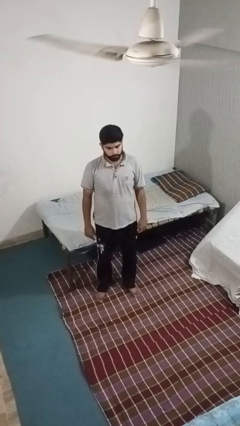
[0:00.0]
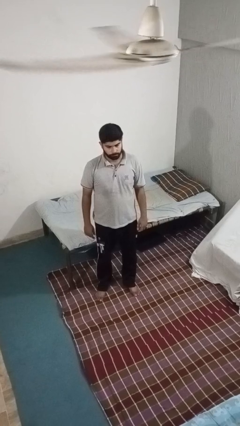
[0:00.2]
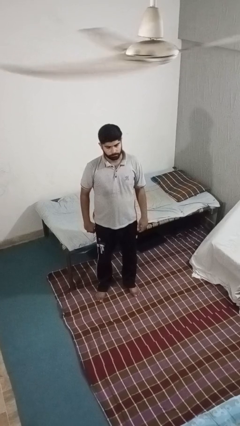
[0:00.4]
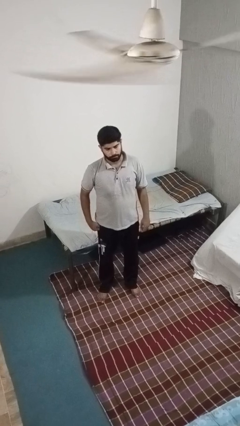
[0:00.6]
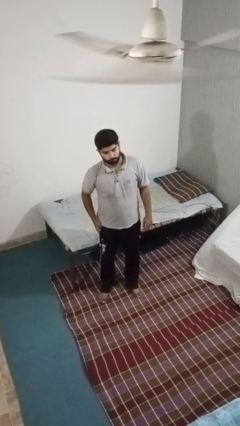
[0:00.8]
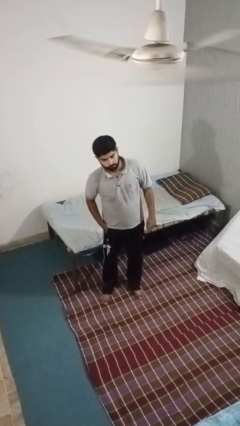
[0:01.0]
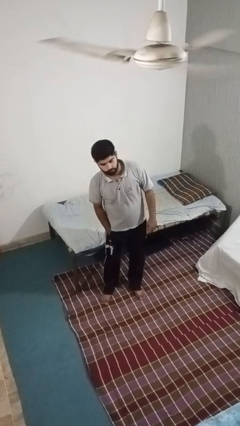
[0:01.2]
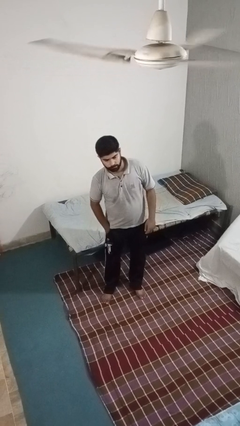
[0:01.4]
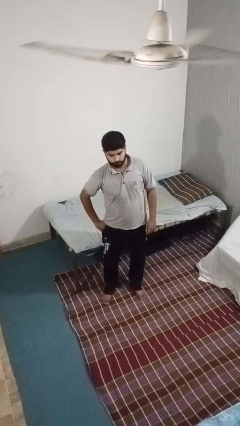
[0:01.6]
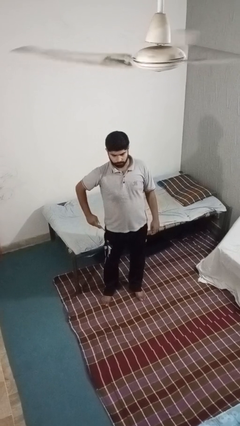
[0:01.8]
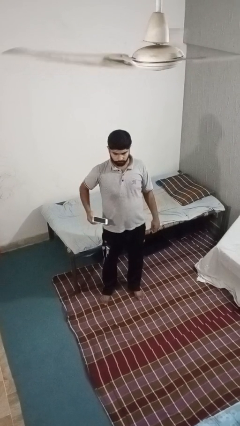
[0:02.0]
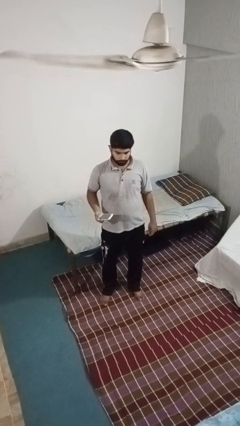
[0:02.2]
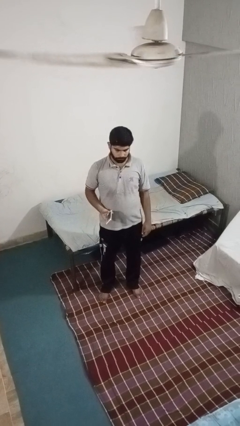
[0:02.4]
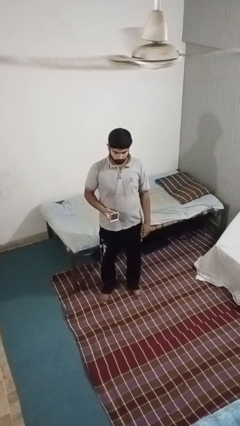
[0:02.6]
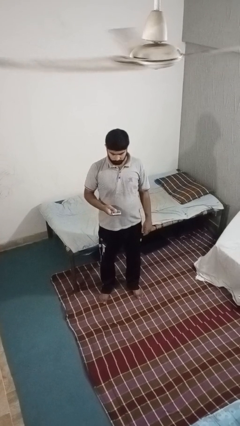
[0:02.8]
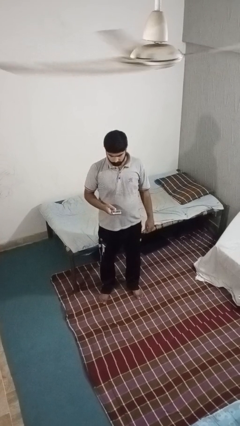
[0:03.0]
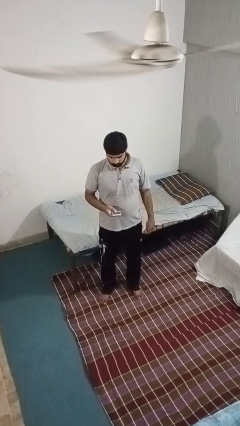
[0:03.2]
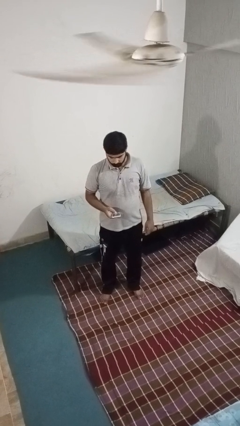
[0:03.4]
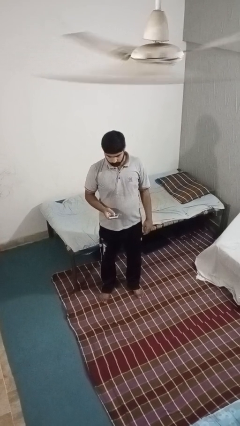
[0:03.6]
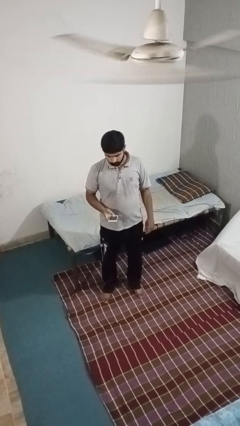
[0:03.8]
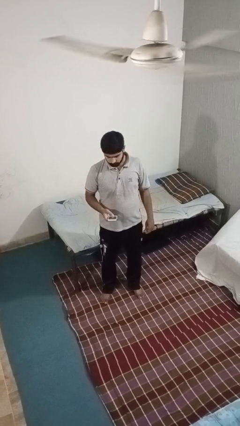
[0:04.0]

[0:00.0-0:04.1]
person takes phone from pocket

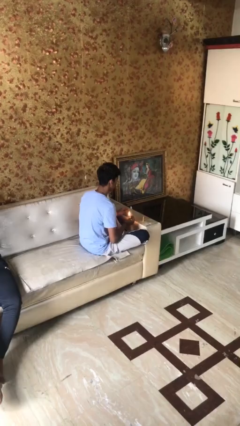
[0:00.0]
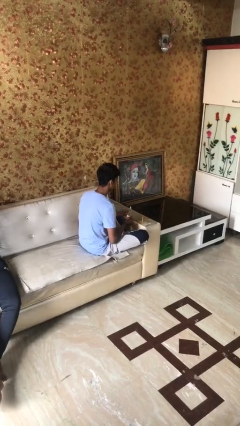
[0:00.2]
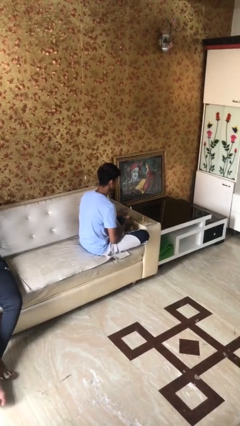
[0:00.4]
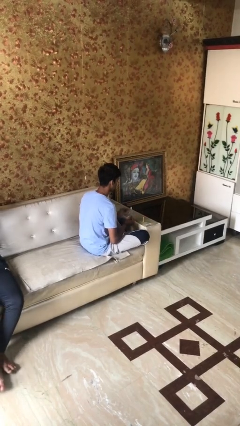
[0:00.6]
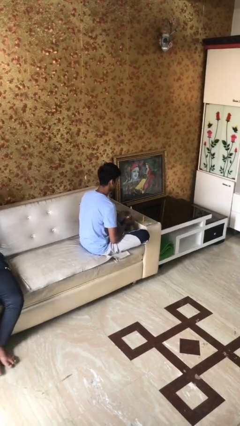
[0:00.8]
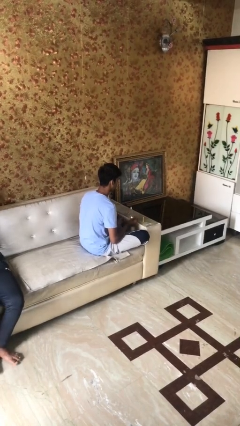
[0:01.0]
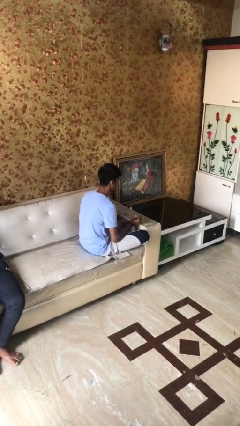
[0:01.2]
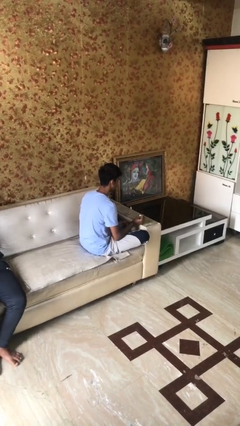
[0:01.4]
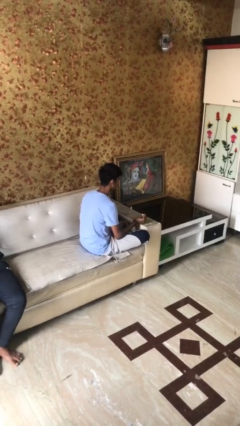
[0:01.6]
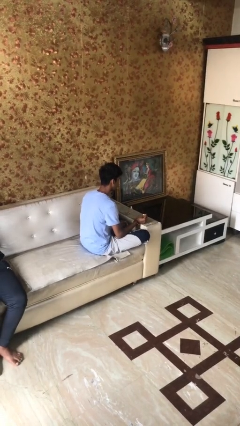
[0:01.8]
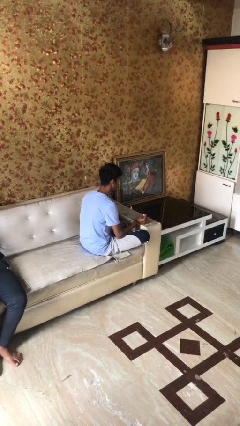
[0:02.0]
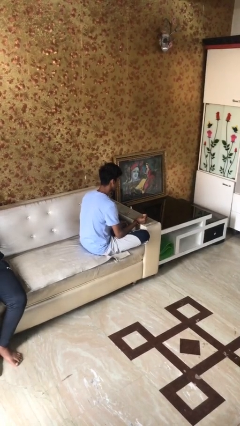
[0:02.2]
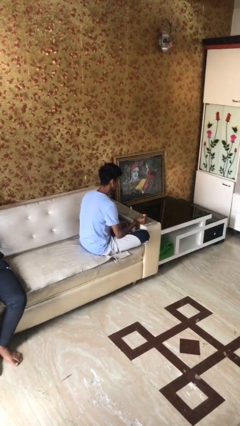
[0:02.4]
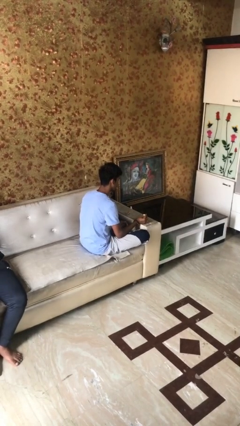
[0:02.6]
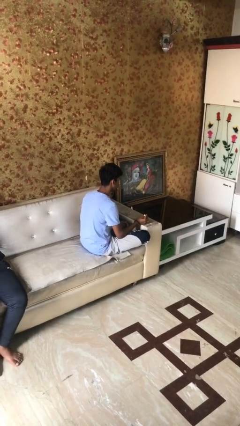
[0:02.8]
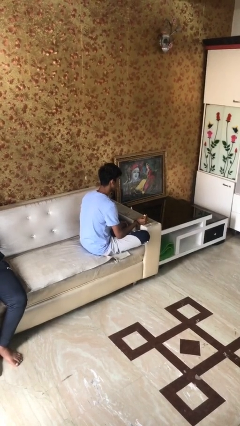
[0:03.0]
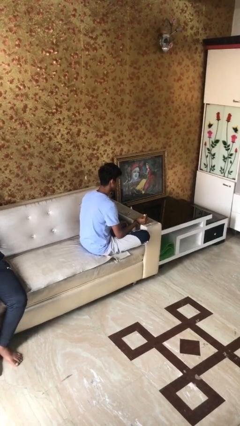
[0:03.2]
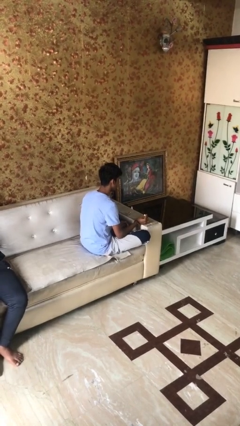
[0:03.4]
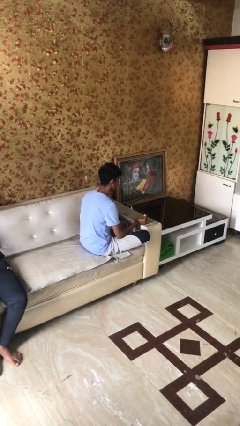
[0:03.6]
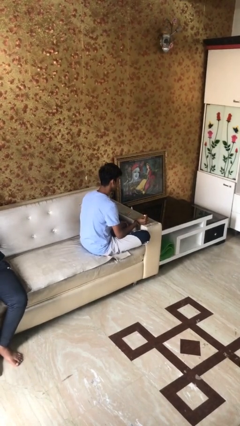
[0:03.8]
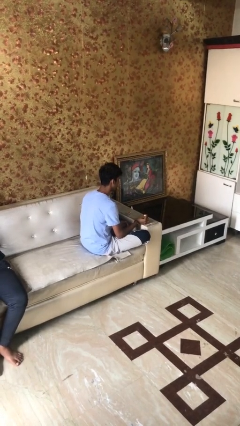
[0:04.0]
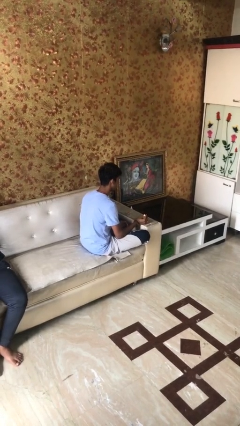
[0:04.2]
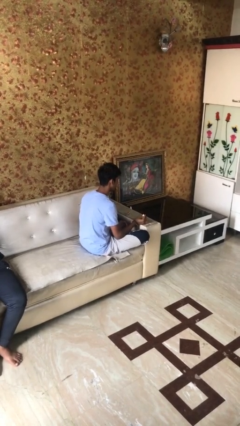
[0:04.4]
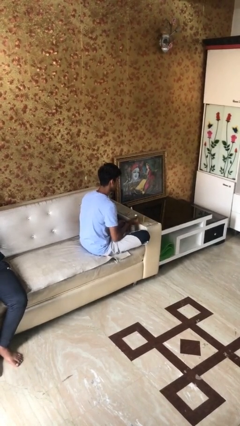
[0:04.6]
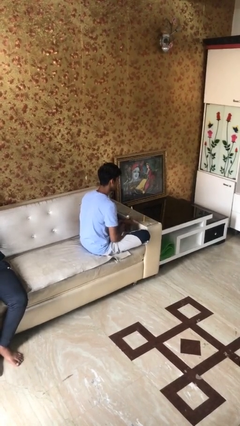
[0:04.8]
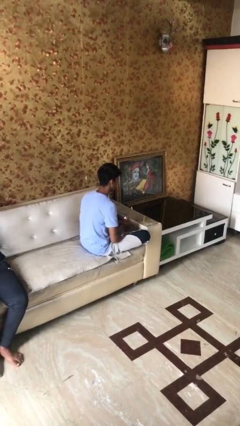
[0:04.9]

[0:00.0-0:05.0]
person lights candle

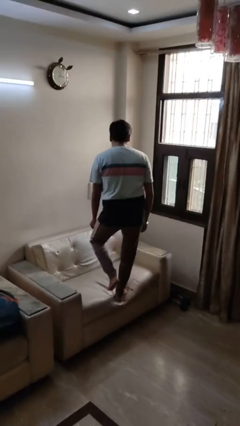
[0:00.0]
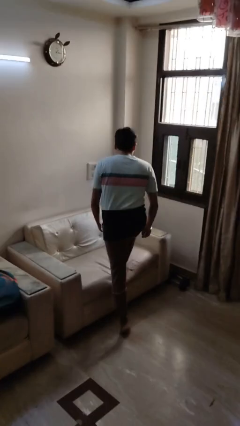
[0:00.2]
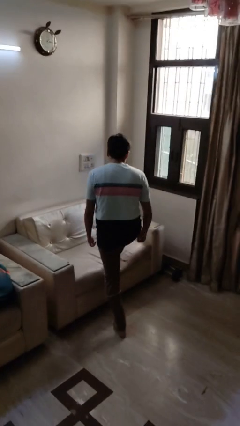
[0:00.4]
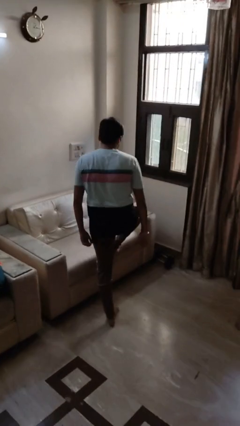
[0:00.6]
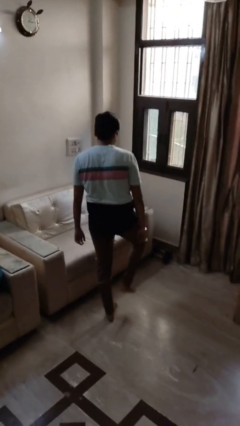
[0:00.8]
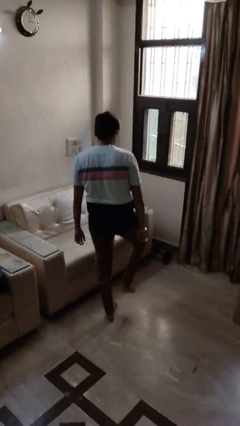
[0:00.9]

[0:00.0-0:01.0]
person climbs off couch

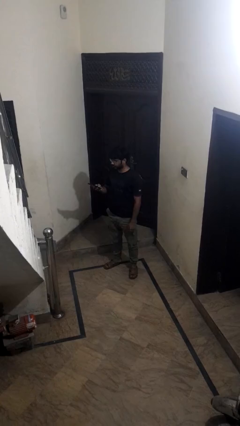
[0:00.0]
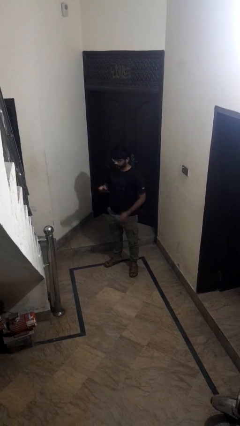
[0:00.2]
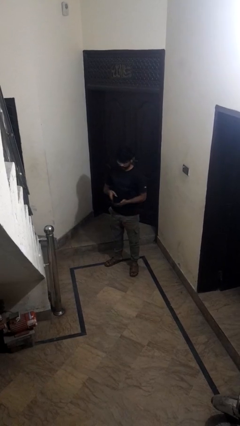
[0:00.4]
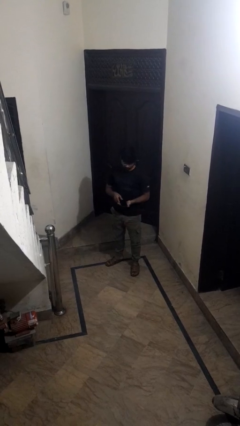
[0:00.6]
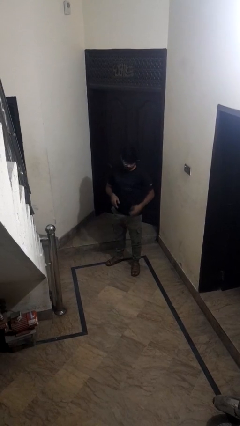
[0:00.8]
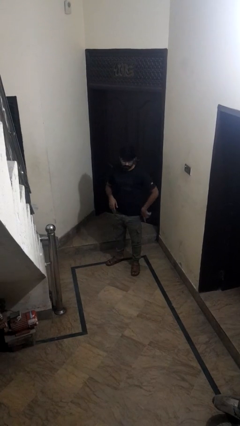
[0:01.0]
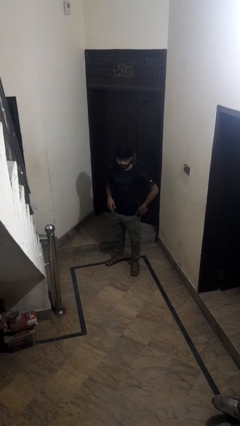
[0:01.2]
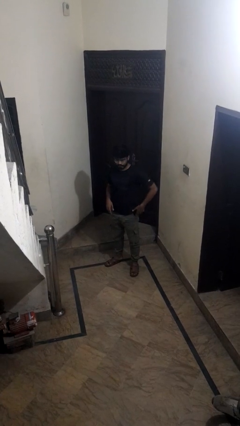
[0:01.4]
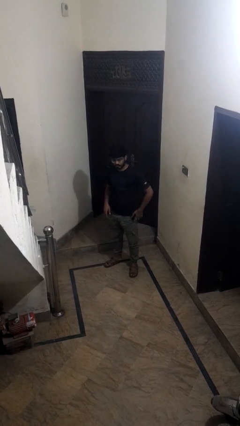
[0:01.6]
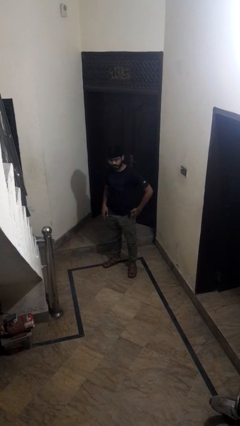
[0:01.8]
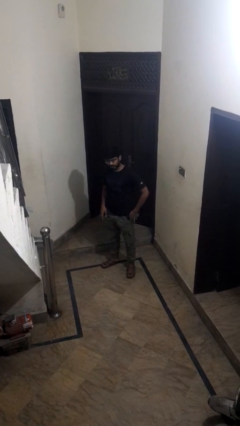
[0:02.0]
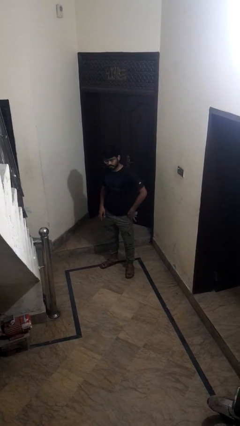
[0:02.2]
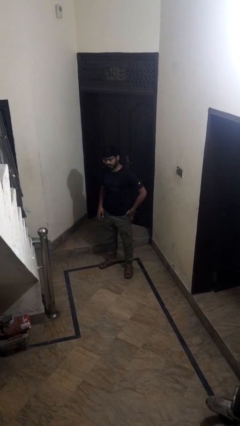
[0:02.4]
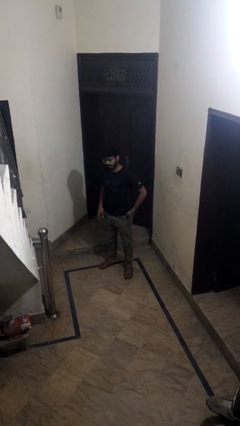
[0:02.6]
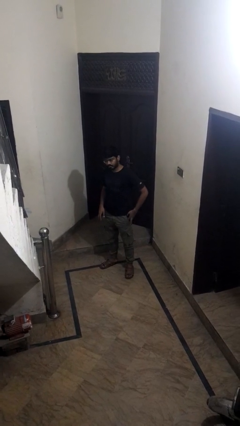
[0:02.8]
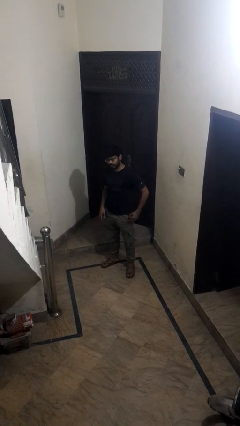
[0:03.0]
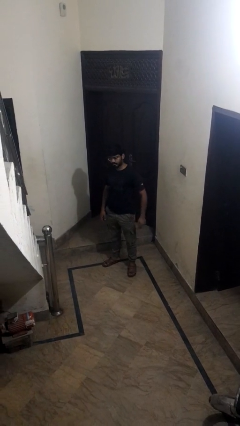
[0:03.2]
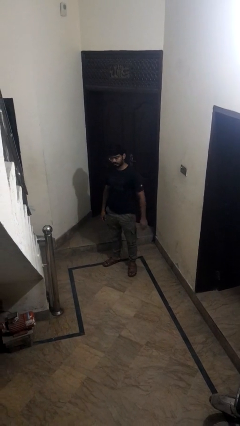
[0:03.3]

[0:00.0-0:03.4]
person puts phone into pocket

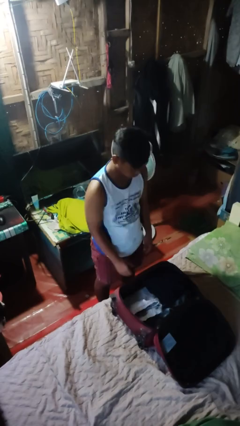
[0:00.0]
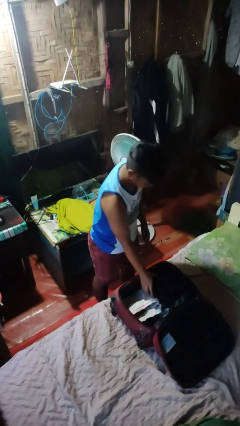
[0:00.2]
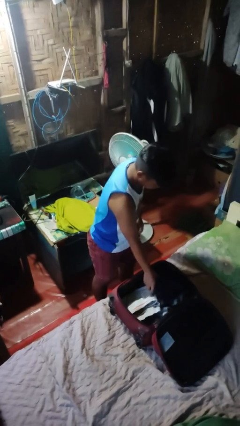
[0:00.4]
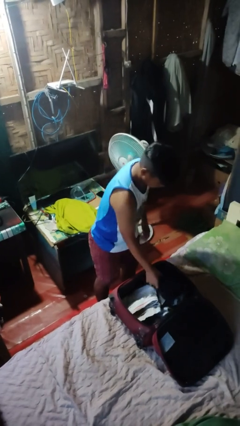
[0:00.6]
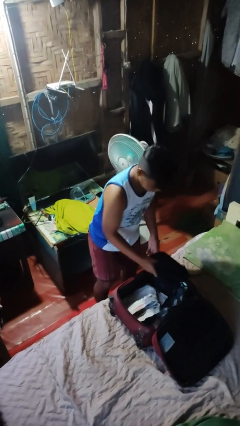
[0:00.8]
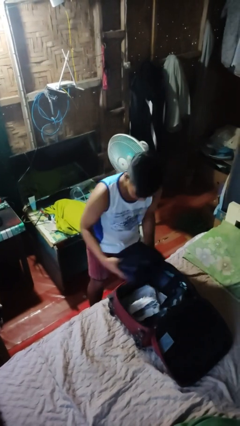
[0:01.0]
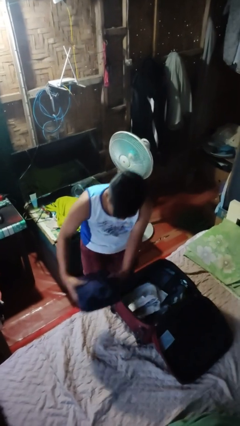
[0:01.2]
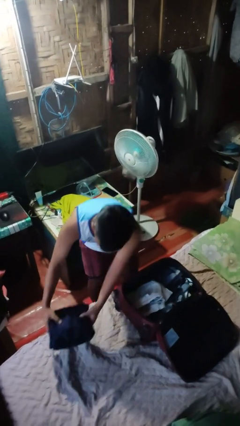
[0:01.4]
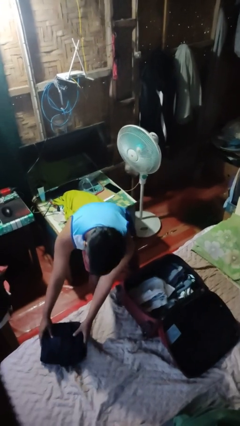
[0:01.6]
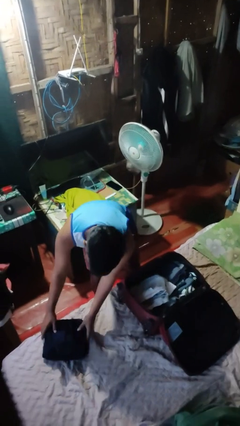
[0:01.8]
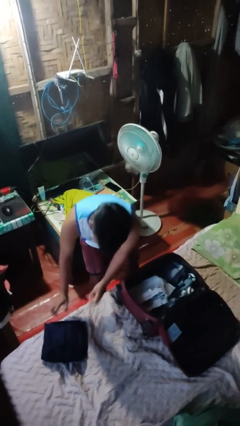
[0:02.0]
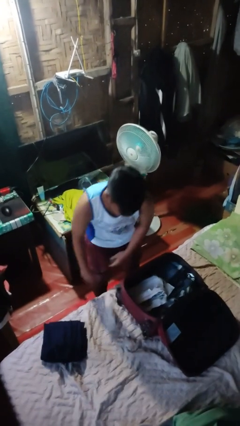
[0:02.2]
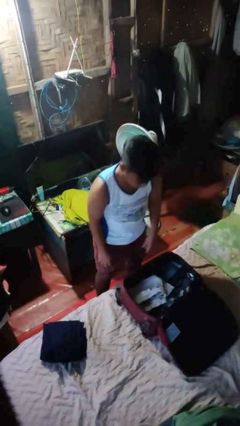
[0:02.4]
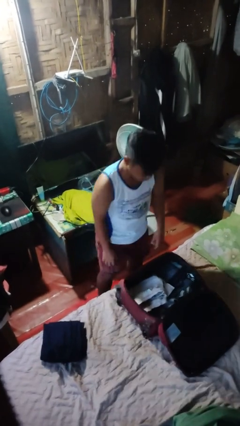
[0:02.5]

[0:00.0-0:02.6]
person unloads clothes from suitcase

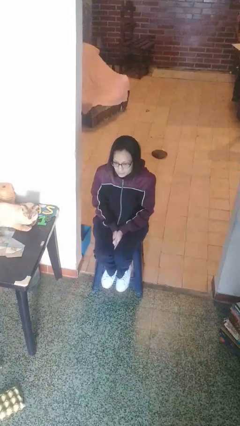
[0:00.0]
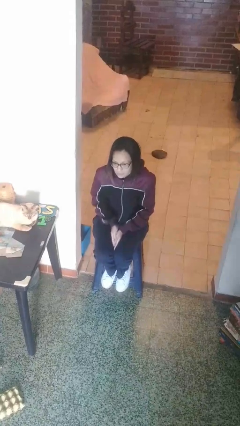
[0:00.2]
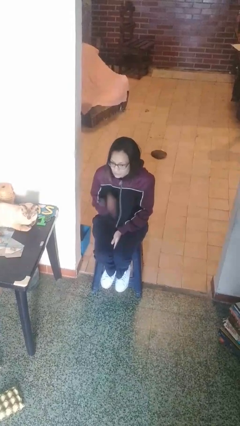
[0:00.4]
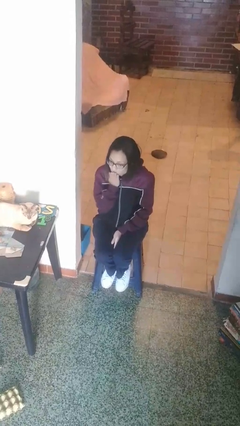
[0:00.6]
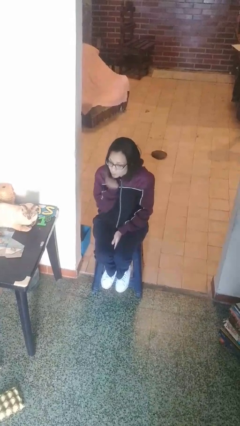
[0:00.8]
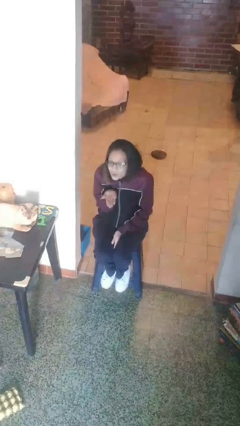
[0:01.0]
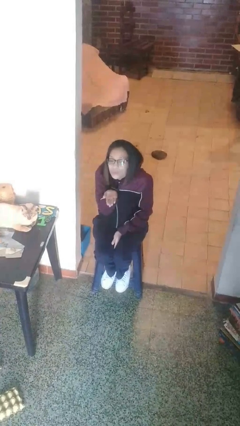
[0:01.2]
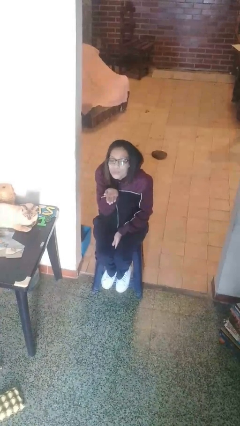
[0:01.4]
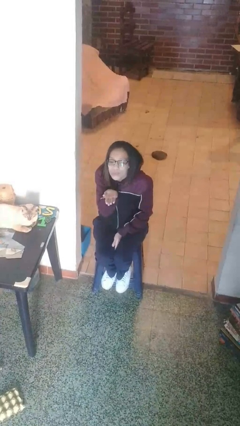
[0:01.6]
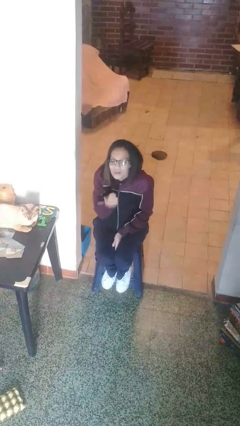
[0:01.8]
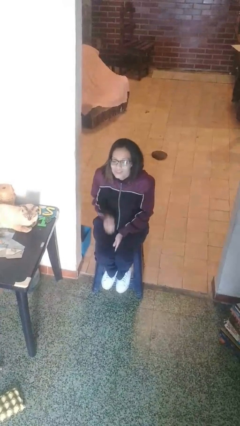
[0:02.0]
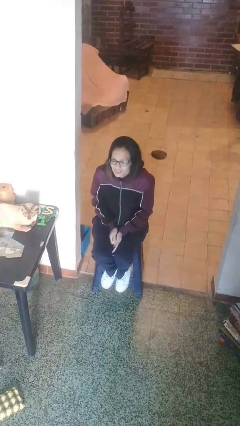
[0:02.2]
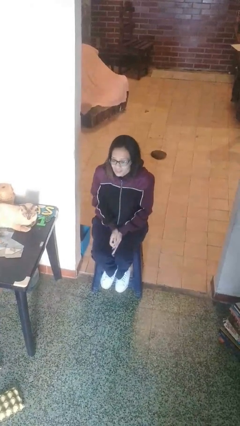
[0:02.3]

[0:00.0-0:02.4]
person gestures blow kiss
